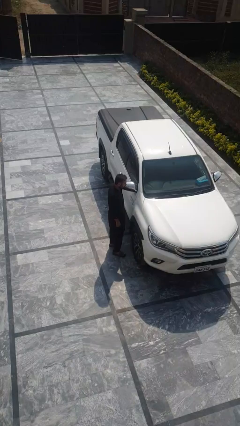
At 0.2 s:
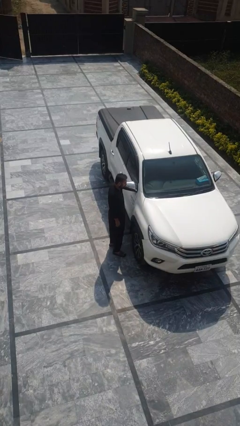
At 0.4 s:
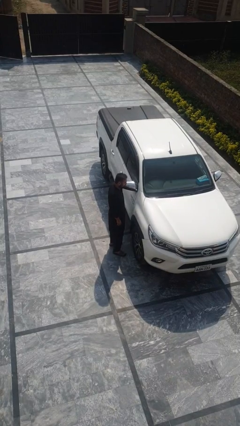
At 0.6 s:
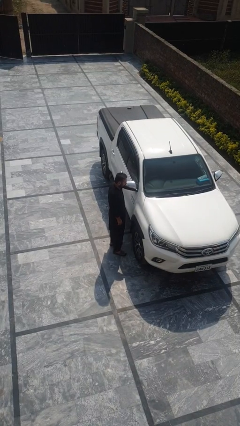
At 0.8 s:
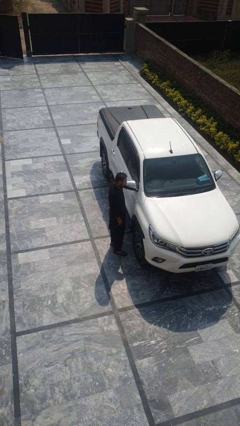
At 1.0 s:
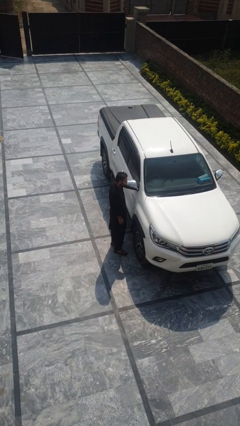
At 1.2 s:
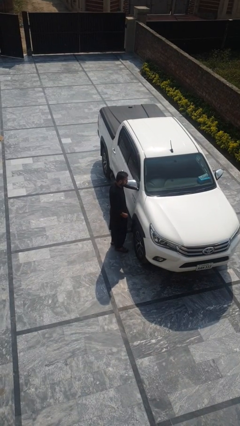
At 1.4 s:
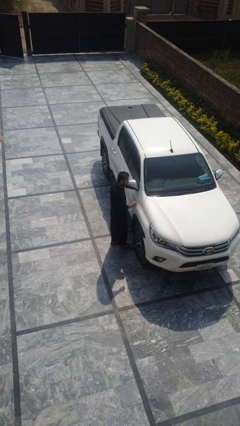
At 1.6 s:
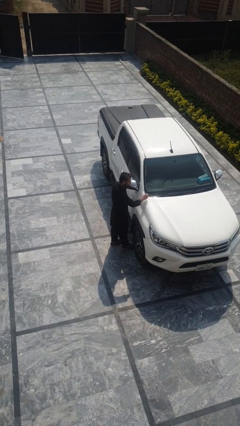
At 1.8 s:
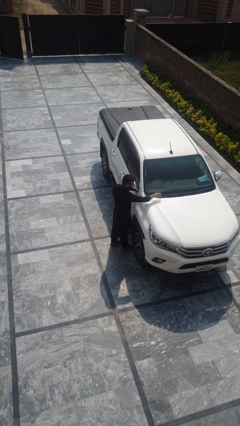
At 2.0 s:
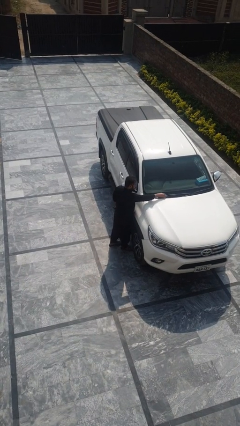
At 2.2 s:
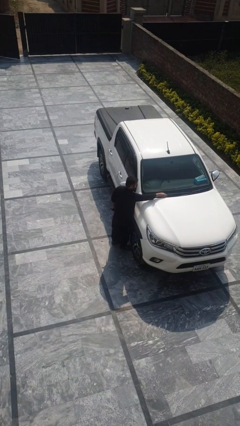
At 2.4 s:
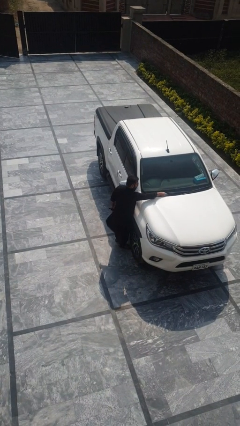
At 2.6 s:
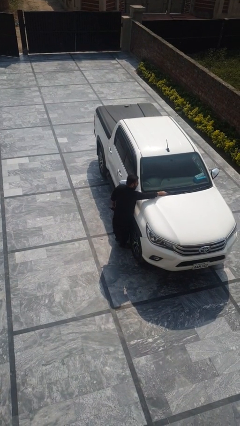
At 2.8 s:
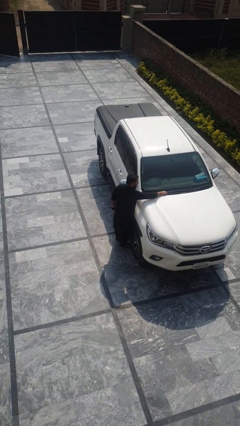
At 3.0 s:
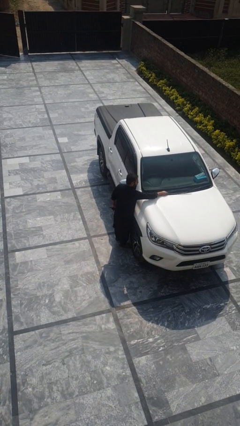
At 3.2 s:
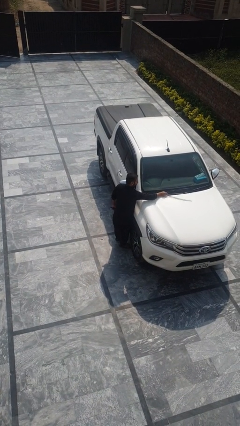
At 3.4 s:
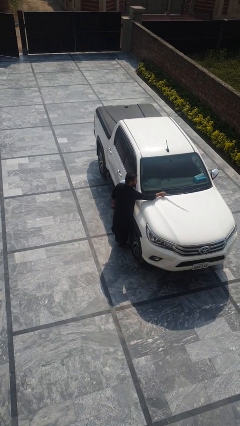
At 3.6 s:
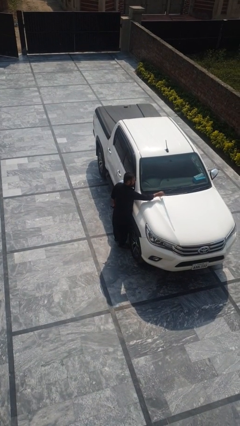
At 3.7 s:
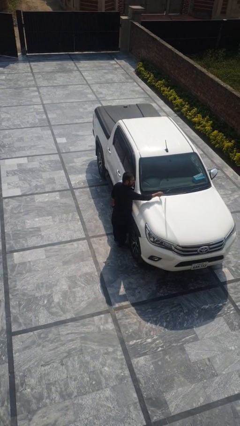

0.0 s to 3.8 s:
person flips up car wipers

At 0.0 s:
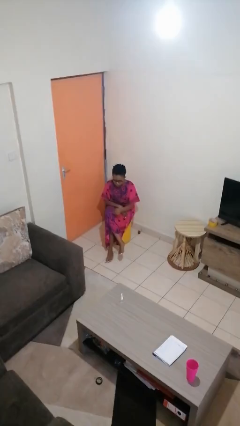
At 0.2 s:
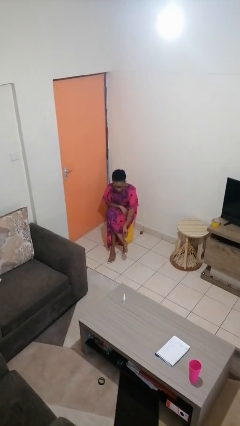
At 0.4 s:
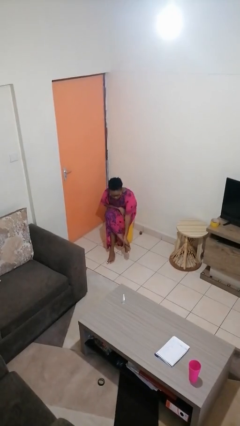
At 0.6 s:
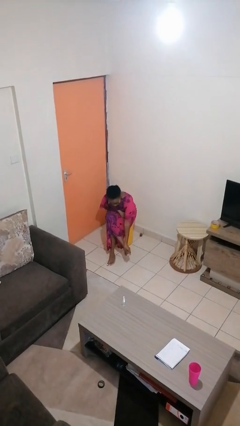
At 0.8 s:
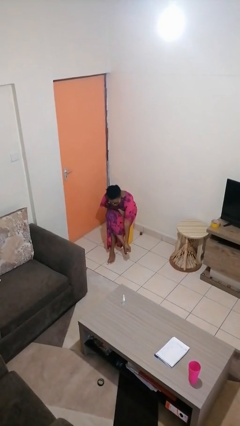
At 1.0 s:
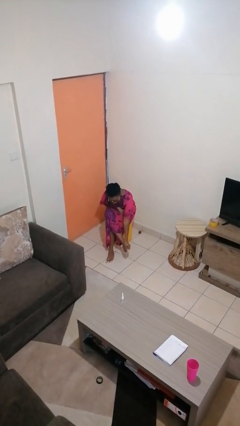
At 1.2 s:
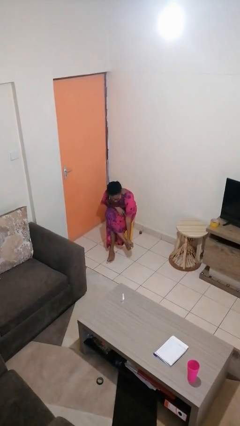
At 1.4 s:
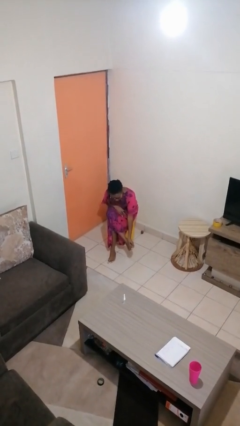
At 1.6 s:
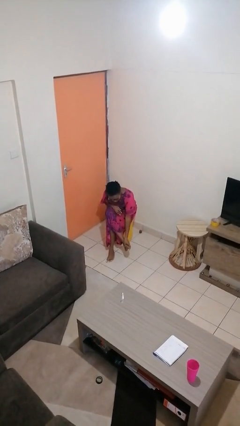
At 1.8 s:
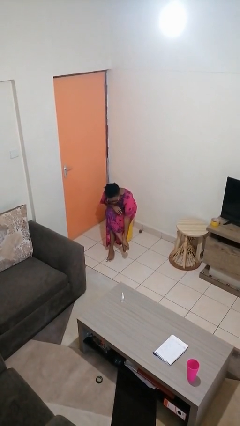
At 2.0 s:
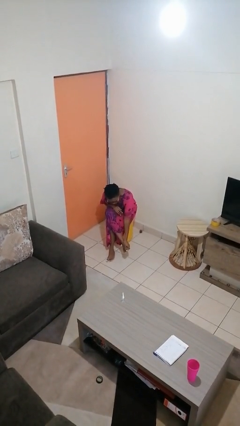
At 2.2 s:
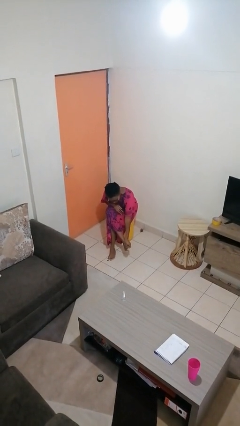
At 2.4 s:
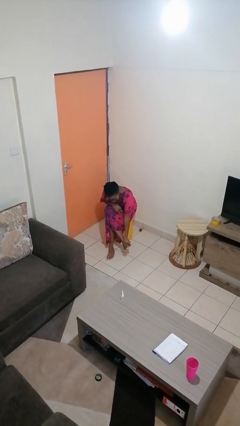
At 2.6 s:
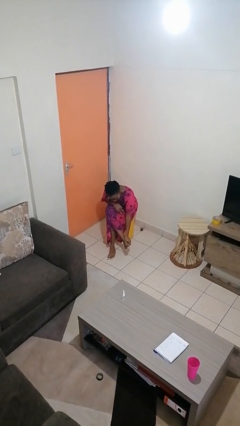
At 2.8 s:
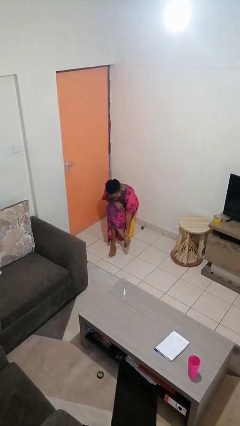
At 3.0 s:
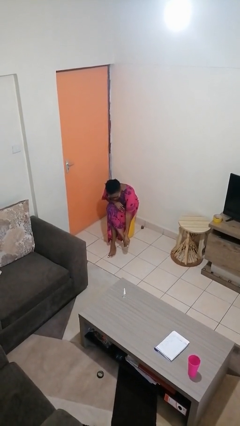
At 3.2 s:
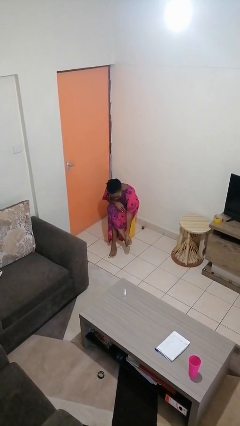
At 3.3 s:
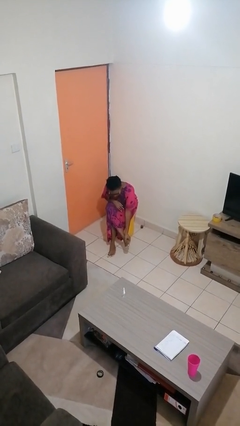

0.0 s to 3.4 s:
person rubs foot

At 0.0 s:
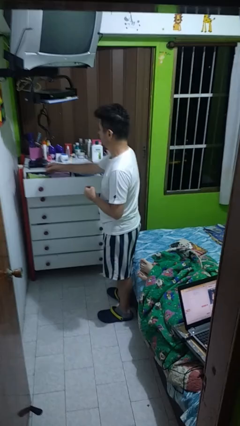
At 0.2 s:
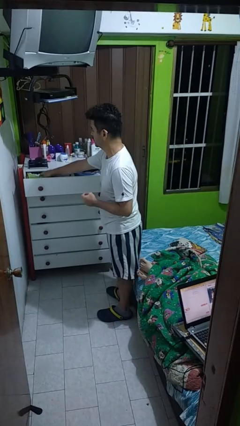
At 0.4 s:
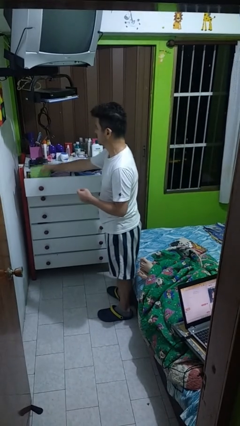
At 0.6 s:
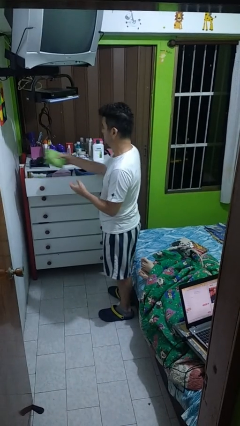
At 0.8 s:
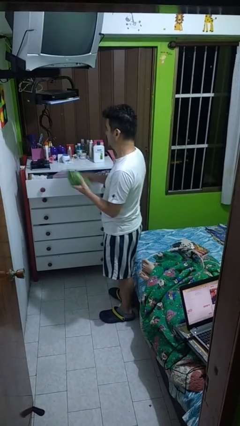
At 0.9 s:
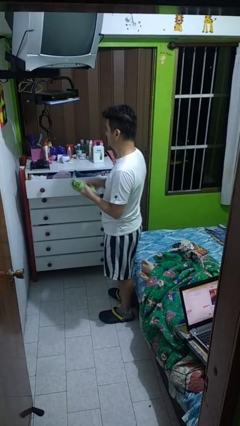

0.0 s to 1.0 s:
person takes clothes from dresser

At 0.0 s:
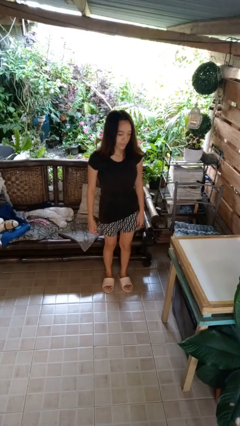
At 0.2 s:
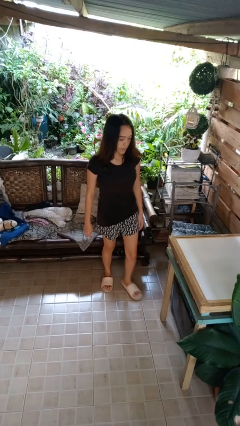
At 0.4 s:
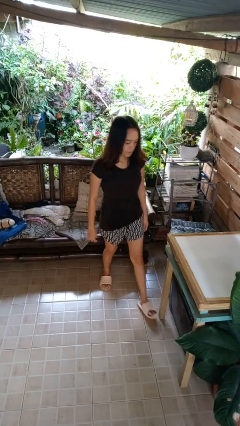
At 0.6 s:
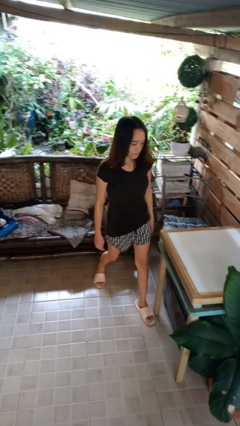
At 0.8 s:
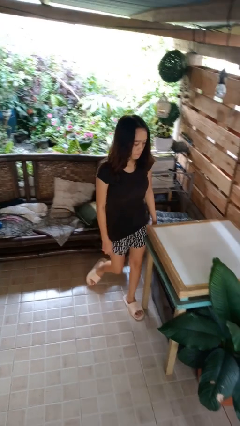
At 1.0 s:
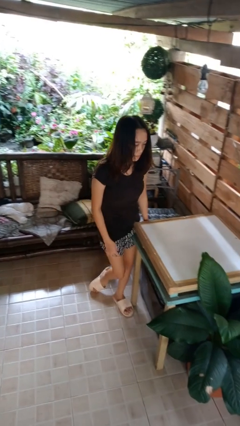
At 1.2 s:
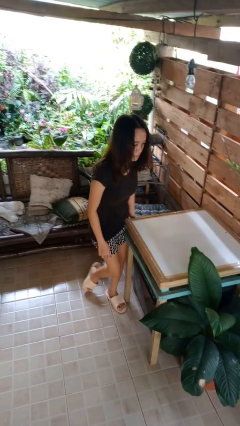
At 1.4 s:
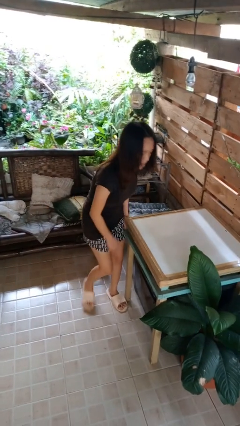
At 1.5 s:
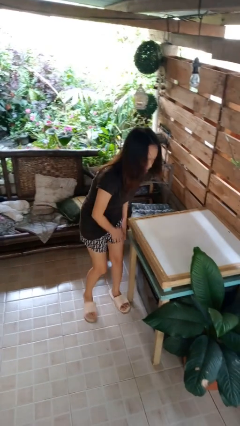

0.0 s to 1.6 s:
person bumps into table

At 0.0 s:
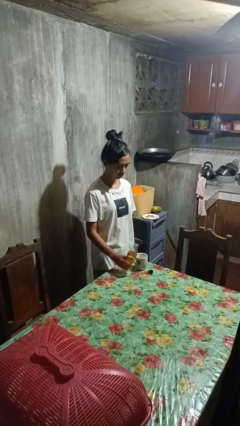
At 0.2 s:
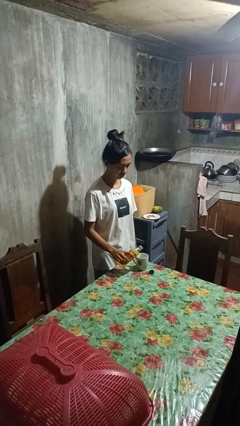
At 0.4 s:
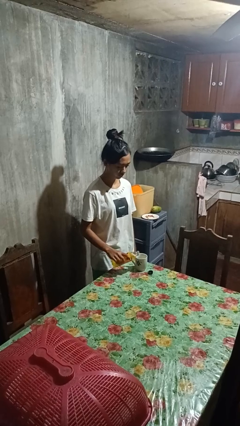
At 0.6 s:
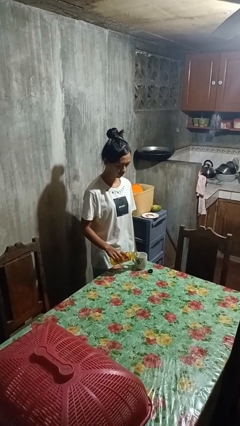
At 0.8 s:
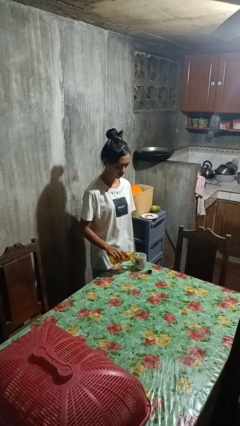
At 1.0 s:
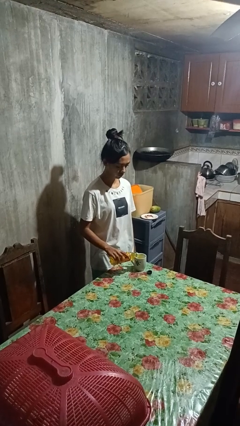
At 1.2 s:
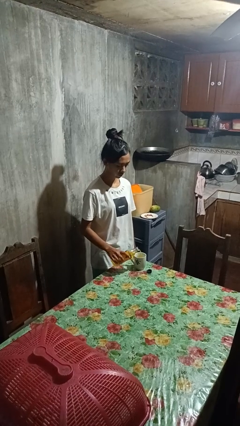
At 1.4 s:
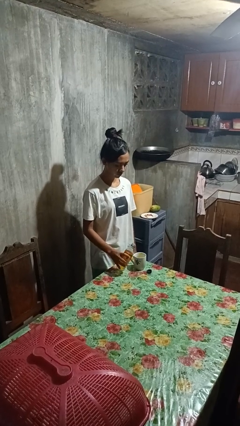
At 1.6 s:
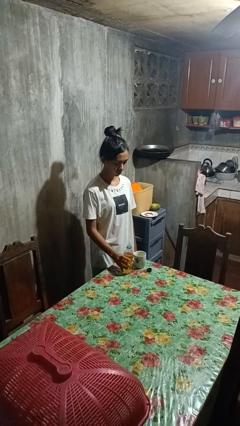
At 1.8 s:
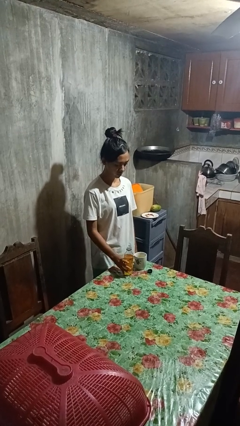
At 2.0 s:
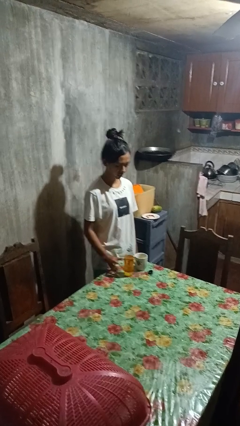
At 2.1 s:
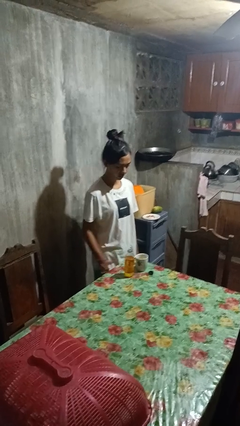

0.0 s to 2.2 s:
person pours liquid into cup

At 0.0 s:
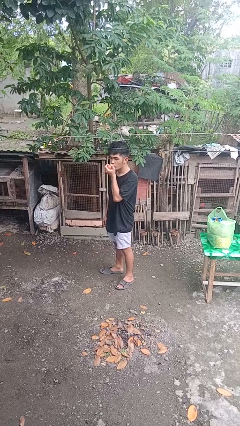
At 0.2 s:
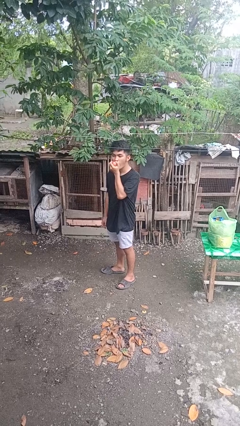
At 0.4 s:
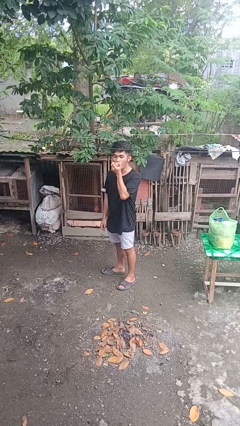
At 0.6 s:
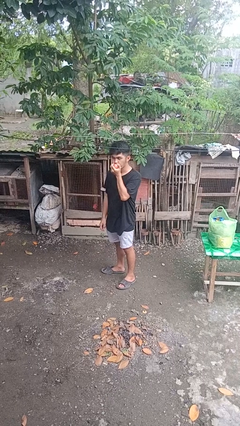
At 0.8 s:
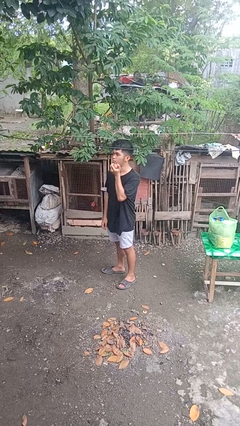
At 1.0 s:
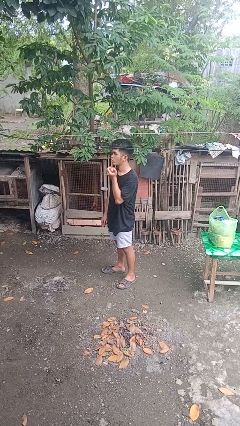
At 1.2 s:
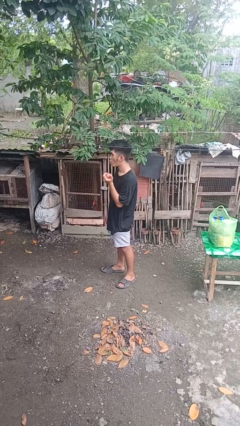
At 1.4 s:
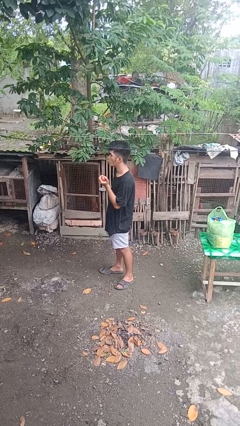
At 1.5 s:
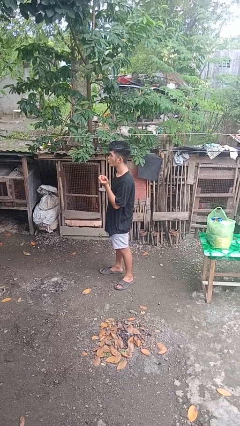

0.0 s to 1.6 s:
person eats apple

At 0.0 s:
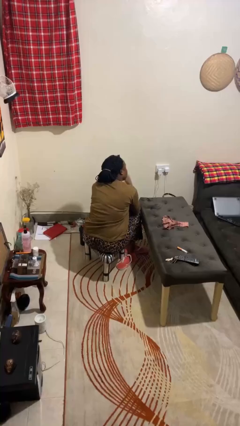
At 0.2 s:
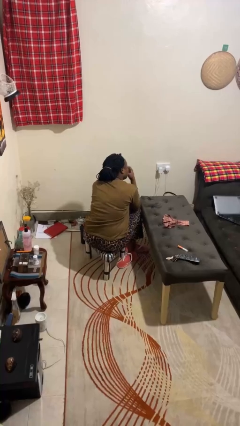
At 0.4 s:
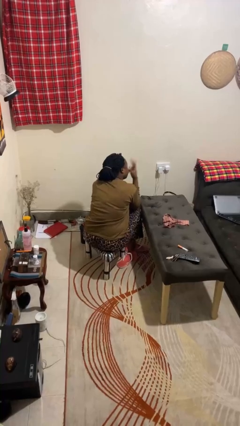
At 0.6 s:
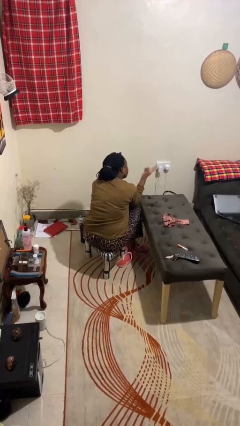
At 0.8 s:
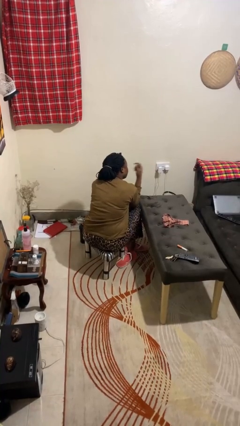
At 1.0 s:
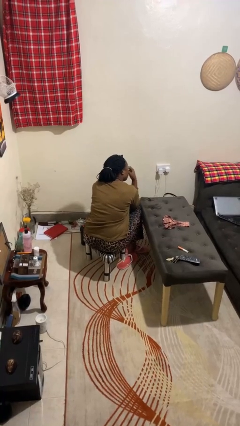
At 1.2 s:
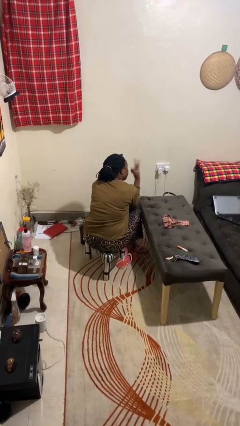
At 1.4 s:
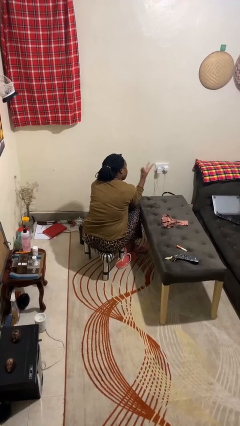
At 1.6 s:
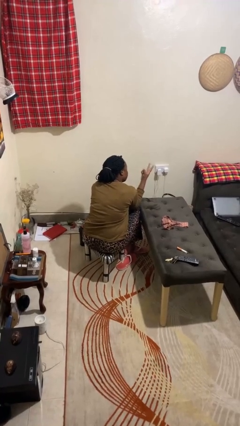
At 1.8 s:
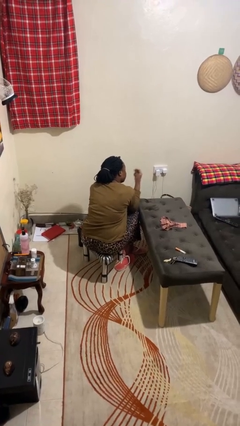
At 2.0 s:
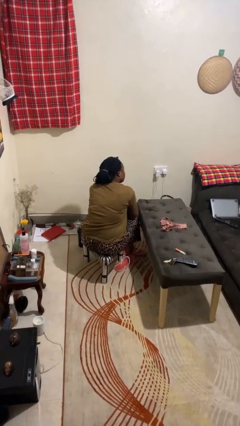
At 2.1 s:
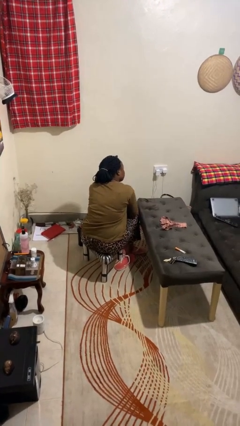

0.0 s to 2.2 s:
person gestures watch closely

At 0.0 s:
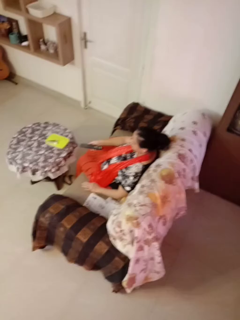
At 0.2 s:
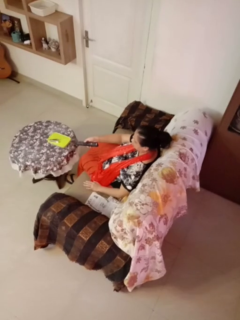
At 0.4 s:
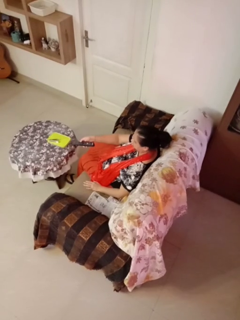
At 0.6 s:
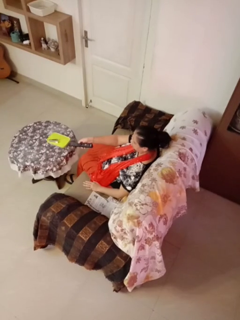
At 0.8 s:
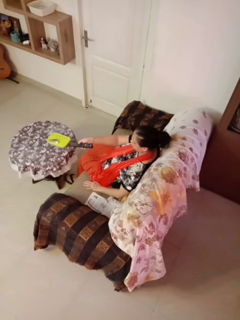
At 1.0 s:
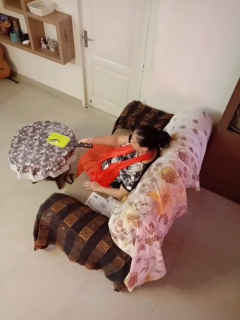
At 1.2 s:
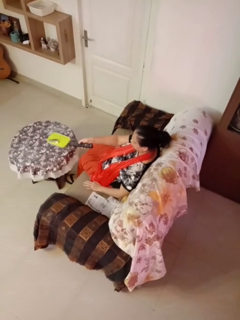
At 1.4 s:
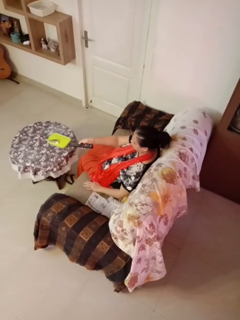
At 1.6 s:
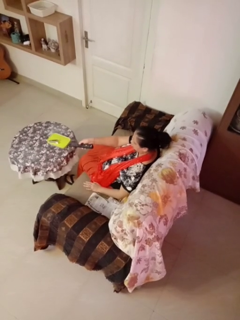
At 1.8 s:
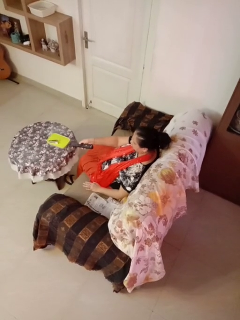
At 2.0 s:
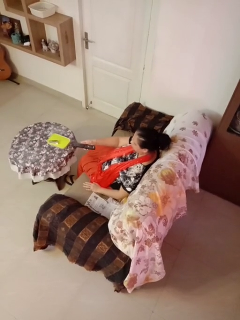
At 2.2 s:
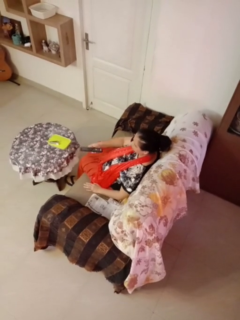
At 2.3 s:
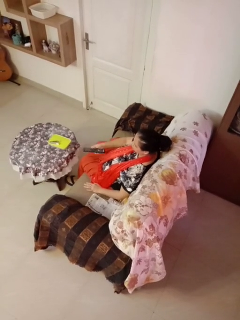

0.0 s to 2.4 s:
person uses television remote
